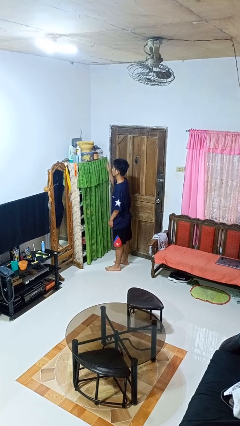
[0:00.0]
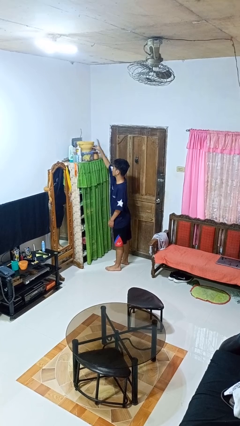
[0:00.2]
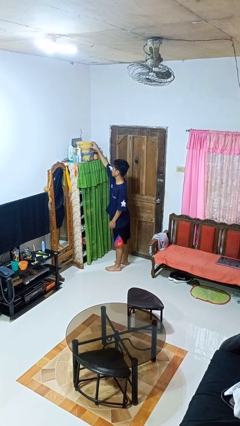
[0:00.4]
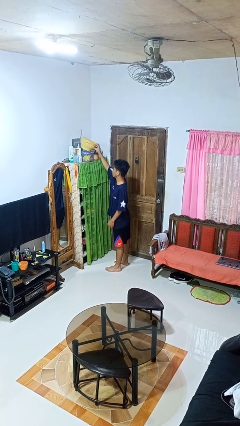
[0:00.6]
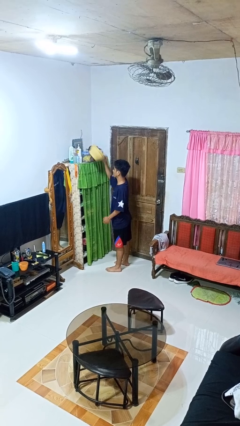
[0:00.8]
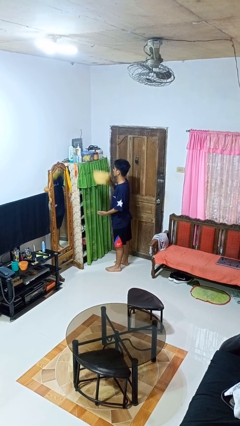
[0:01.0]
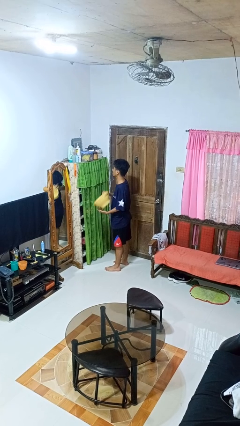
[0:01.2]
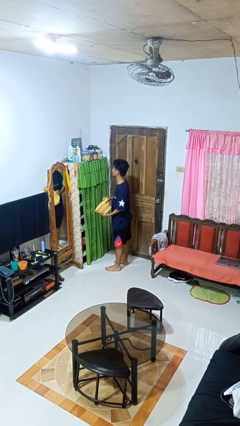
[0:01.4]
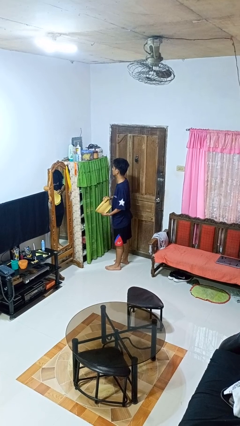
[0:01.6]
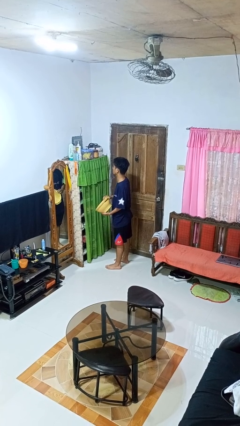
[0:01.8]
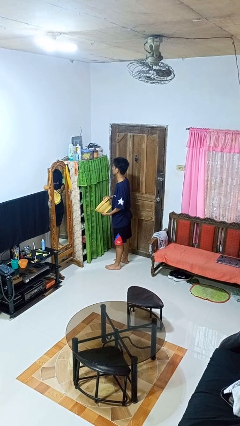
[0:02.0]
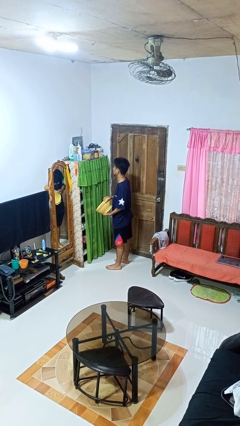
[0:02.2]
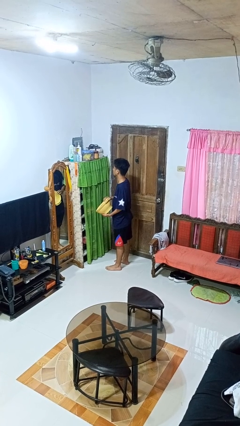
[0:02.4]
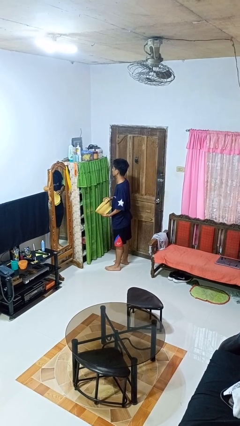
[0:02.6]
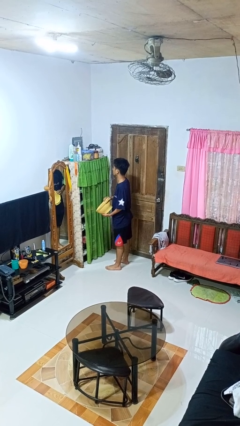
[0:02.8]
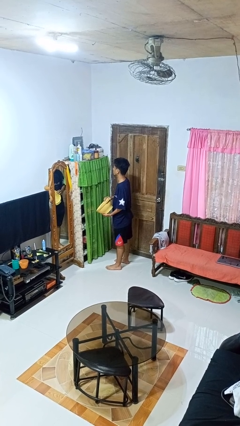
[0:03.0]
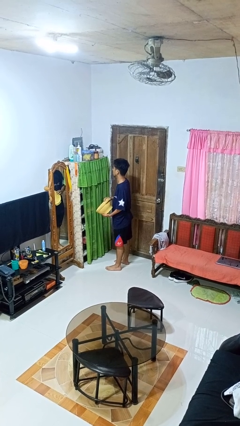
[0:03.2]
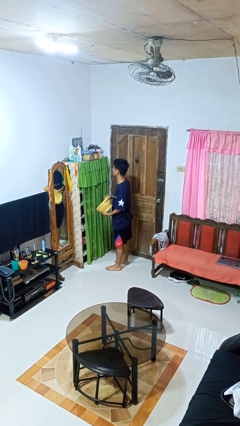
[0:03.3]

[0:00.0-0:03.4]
person picks up object from shelf

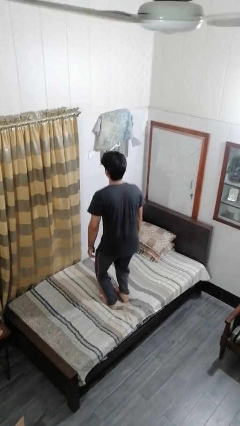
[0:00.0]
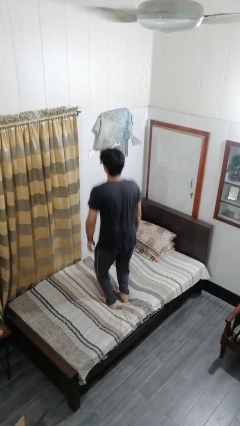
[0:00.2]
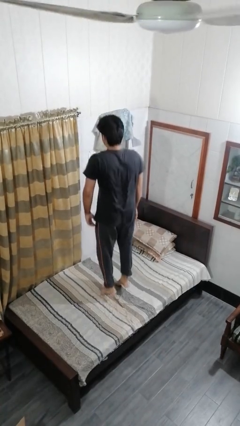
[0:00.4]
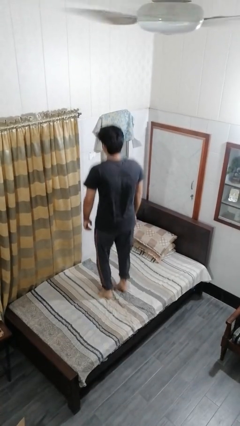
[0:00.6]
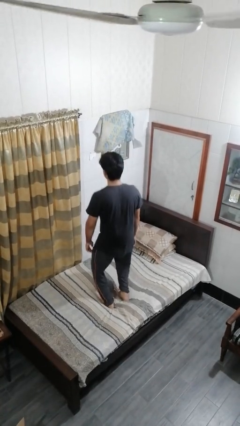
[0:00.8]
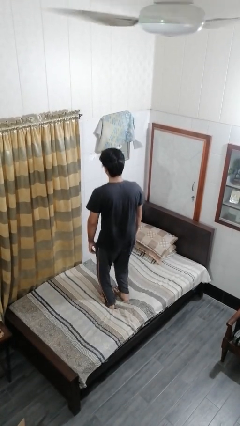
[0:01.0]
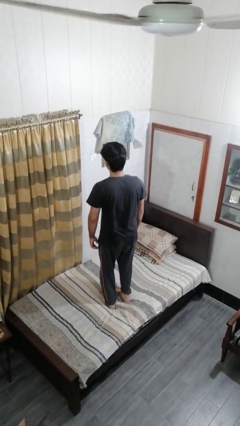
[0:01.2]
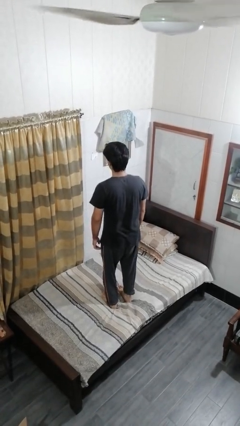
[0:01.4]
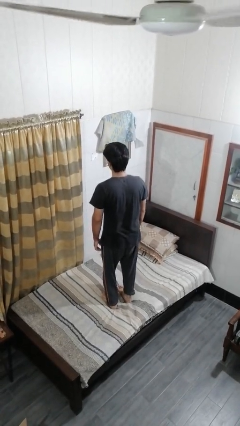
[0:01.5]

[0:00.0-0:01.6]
person jumps on bed

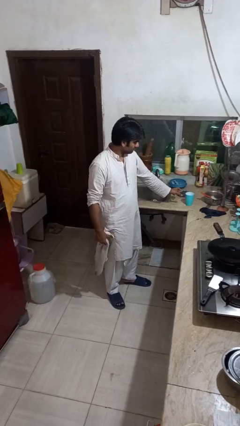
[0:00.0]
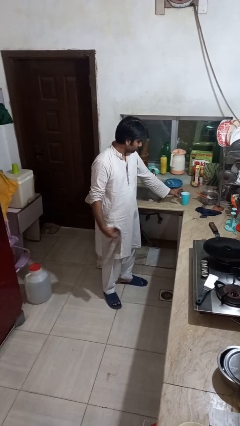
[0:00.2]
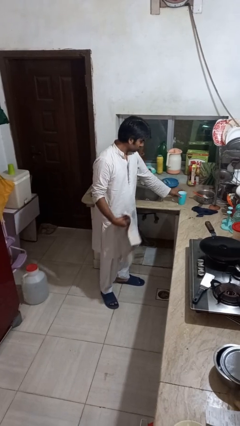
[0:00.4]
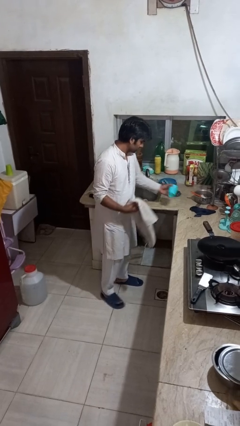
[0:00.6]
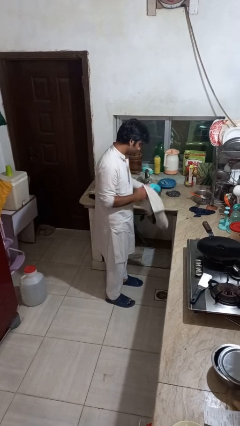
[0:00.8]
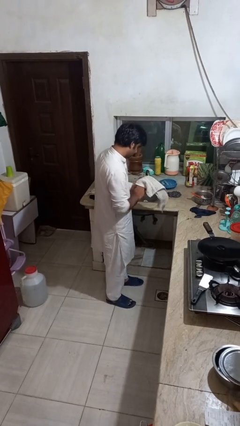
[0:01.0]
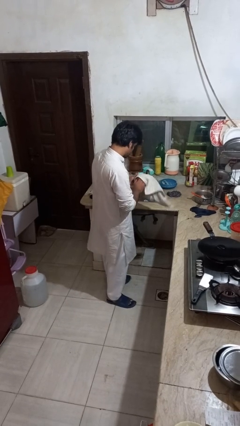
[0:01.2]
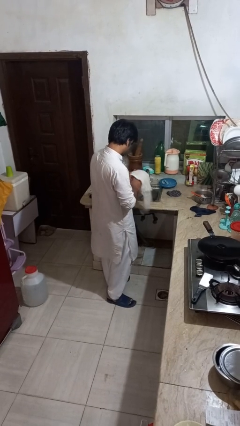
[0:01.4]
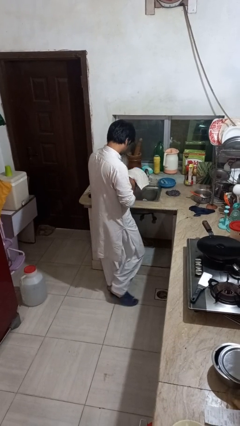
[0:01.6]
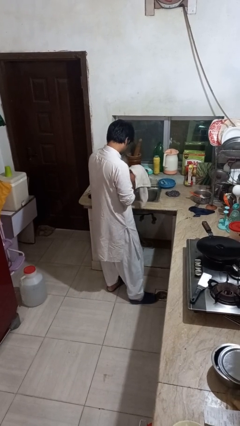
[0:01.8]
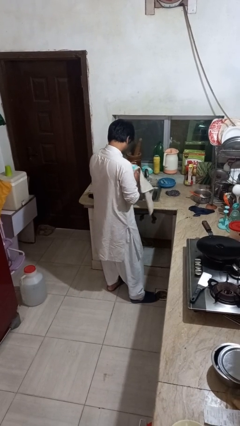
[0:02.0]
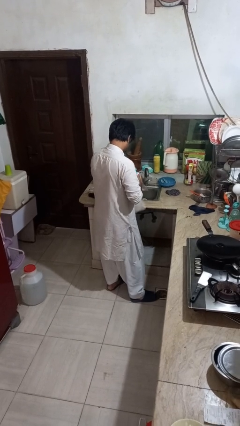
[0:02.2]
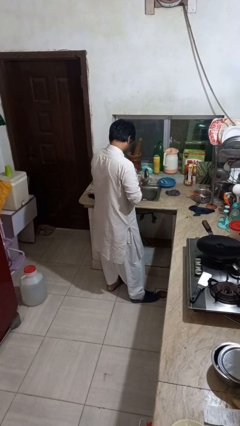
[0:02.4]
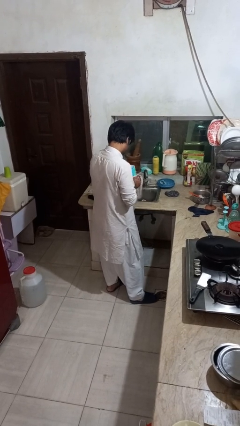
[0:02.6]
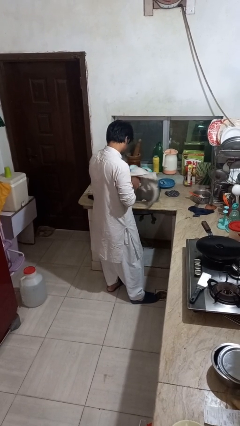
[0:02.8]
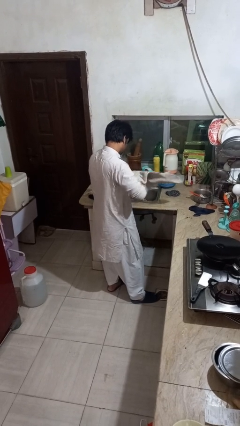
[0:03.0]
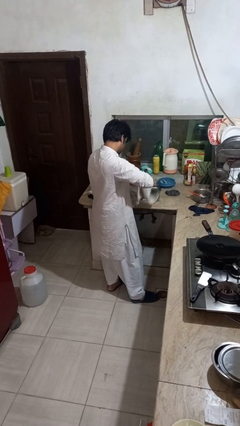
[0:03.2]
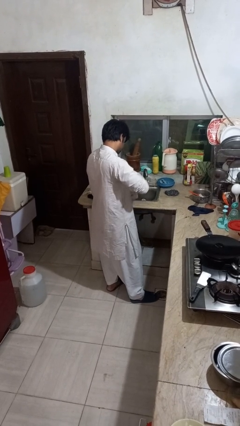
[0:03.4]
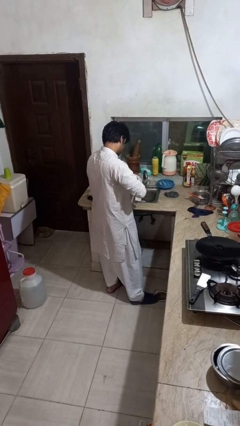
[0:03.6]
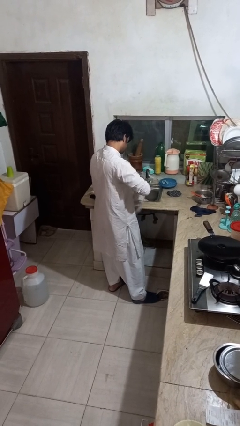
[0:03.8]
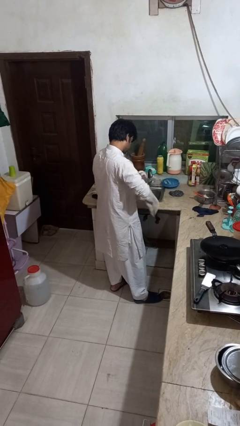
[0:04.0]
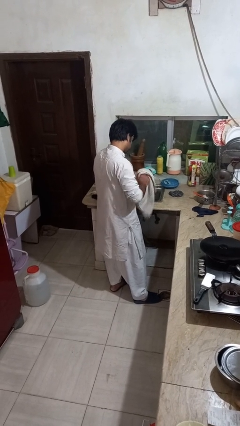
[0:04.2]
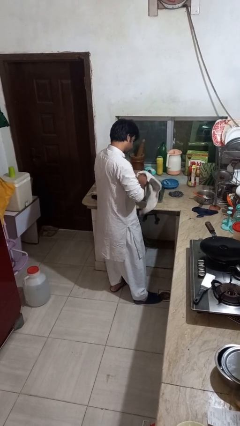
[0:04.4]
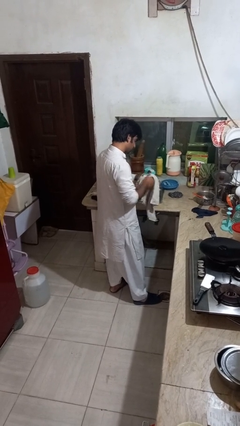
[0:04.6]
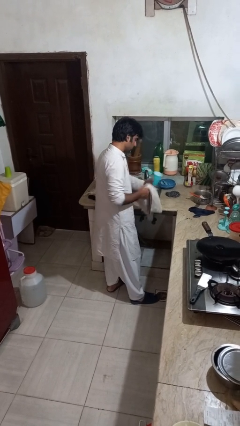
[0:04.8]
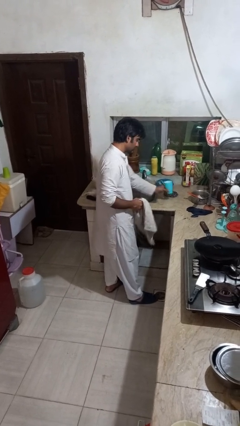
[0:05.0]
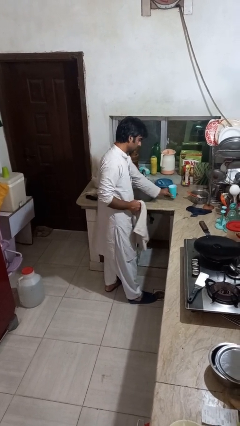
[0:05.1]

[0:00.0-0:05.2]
person dries dish

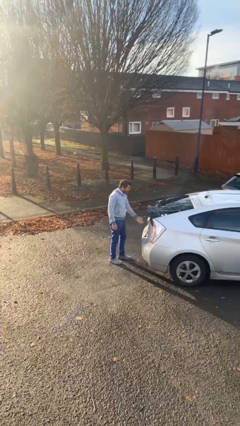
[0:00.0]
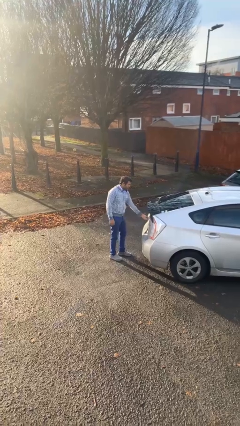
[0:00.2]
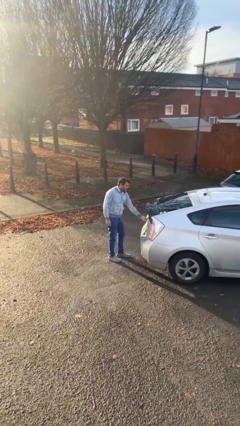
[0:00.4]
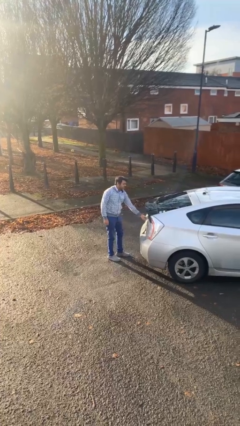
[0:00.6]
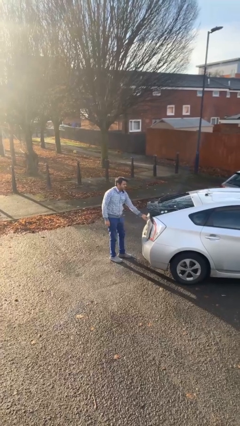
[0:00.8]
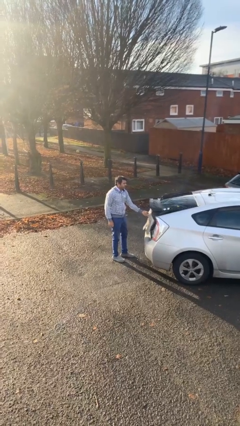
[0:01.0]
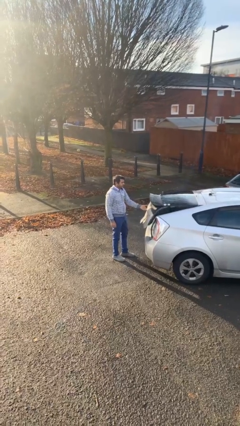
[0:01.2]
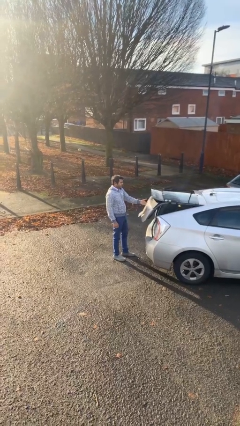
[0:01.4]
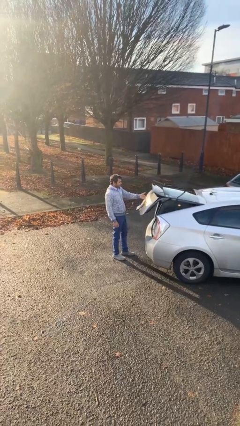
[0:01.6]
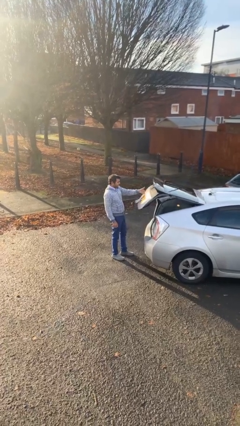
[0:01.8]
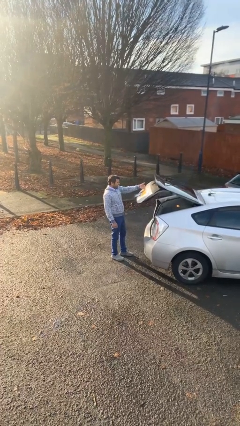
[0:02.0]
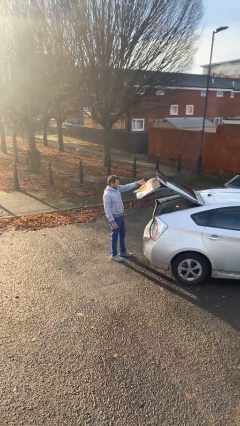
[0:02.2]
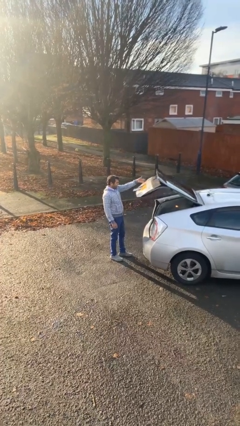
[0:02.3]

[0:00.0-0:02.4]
person opens car trunk

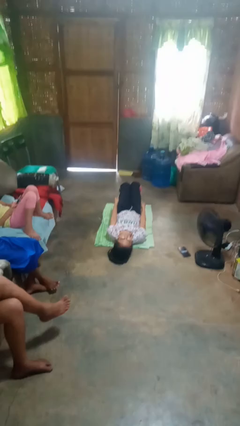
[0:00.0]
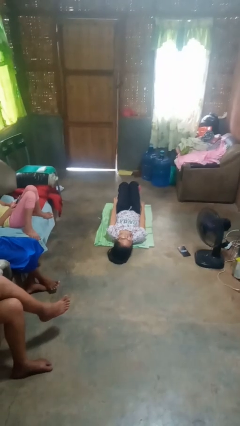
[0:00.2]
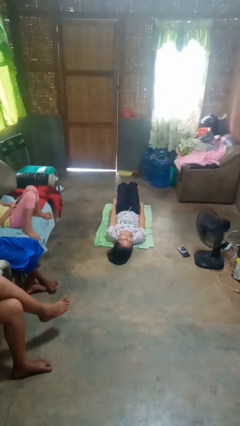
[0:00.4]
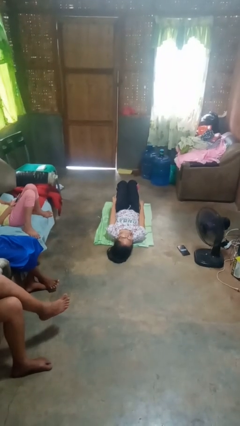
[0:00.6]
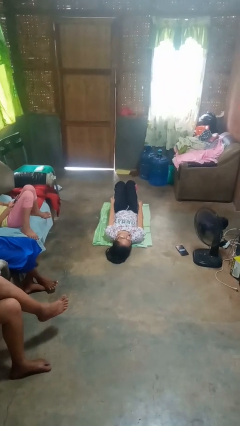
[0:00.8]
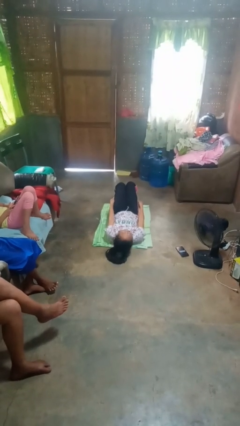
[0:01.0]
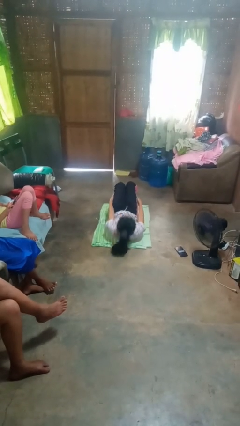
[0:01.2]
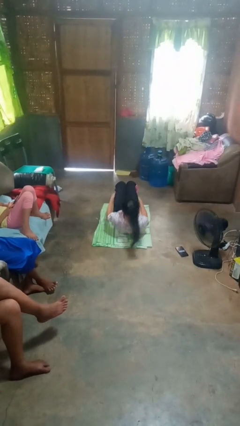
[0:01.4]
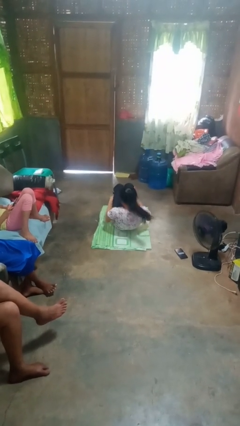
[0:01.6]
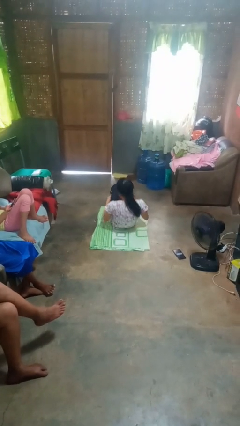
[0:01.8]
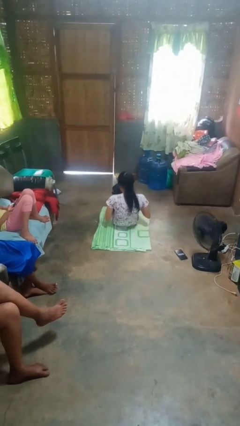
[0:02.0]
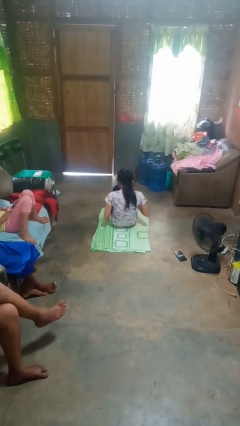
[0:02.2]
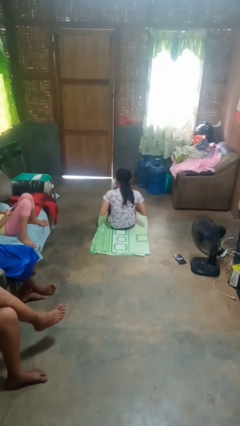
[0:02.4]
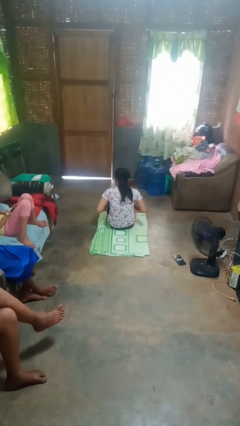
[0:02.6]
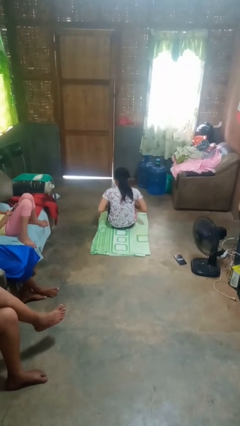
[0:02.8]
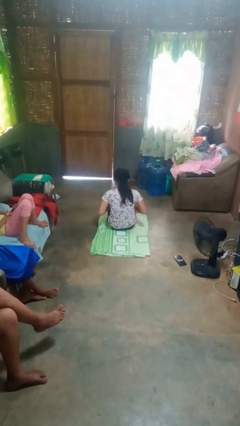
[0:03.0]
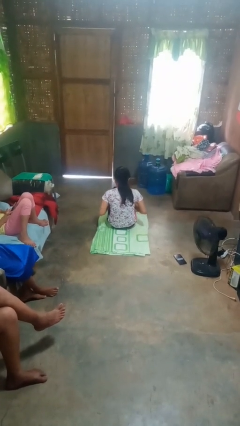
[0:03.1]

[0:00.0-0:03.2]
person exercises with situp

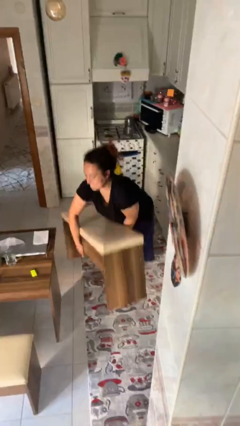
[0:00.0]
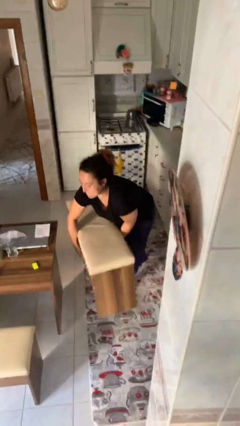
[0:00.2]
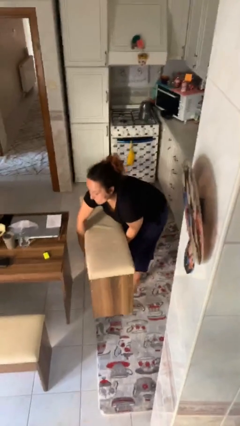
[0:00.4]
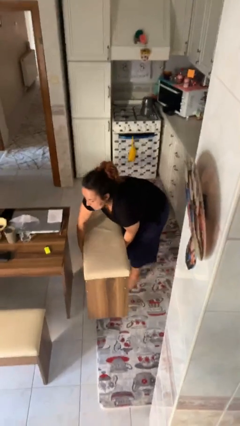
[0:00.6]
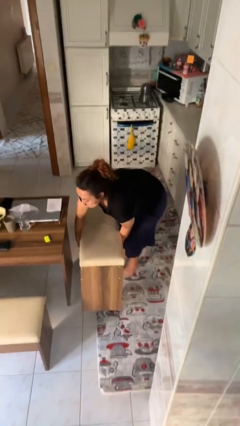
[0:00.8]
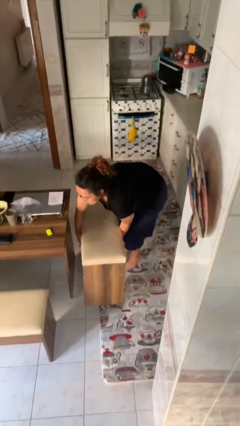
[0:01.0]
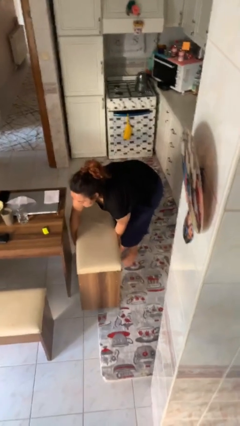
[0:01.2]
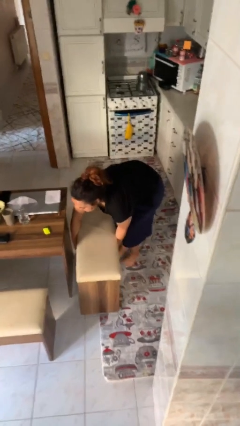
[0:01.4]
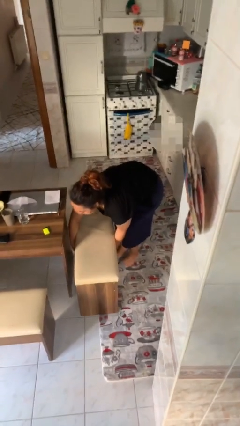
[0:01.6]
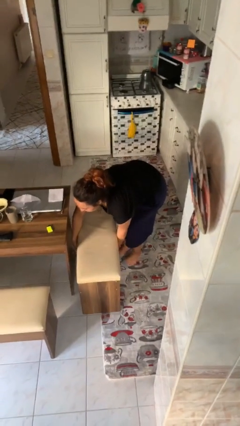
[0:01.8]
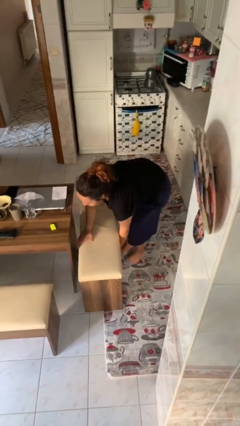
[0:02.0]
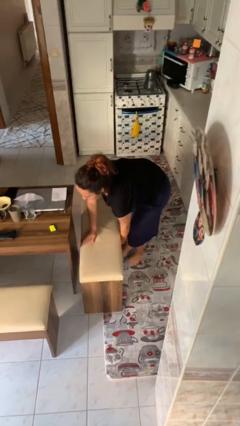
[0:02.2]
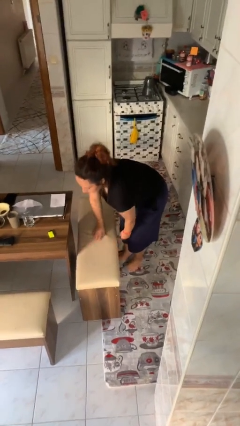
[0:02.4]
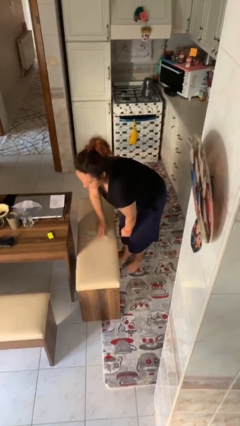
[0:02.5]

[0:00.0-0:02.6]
person puts down object on floor
